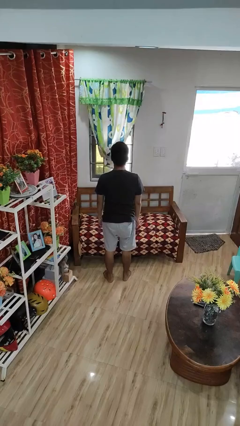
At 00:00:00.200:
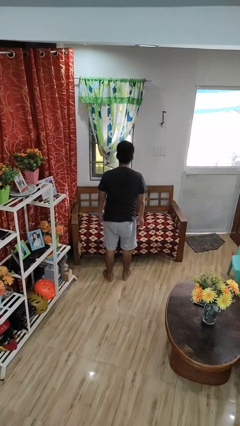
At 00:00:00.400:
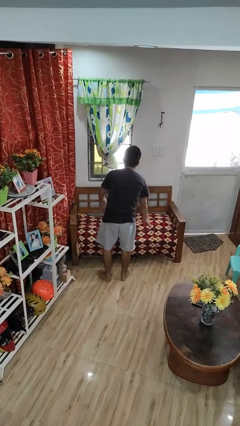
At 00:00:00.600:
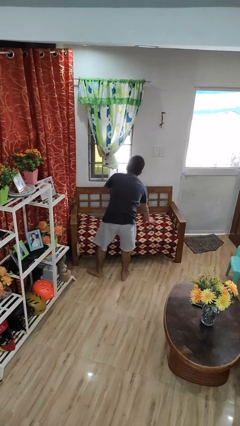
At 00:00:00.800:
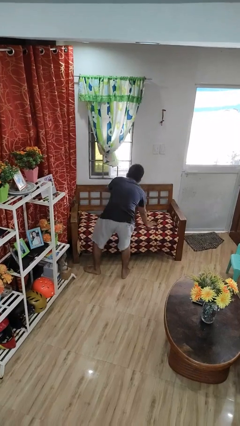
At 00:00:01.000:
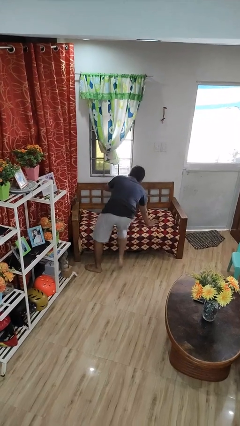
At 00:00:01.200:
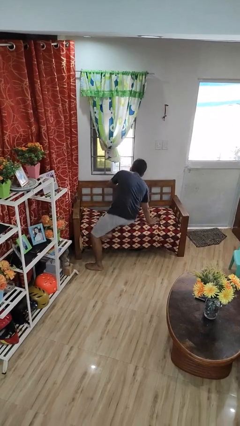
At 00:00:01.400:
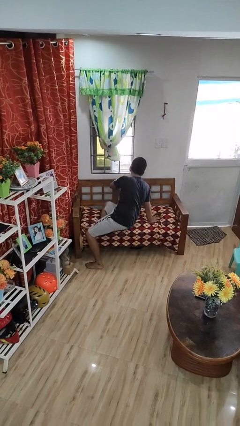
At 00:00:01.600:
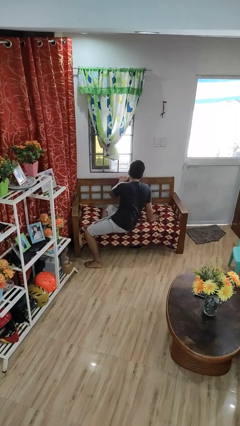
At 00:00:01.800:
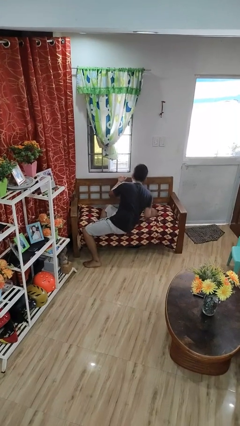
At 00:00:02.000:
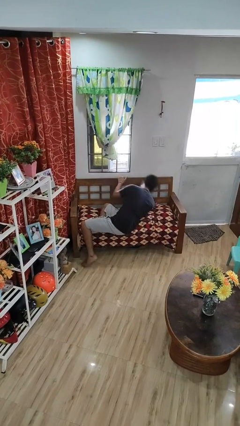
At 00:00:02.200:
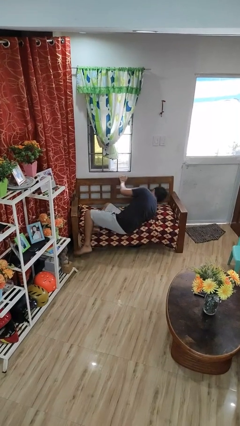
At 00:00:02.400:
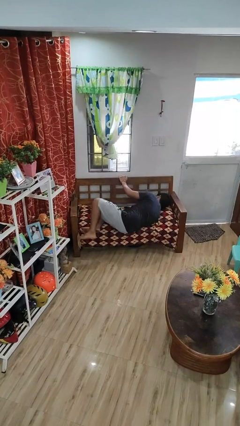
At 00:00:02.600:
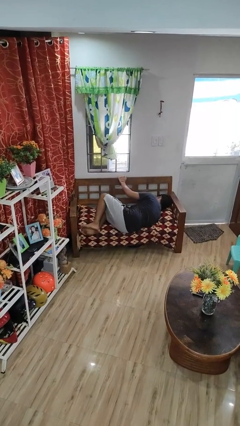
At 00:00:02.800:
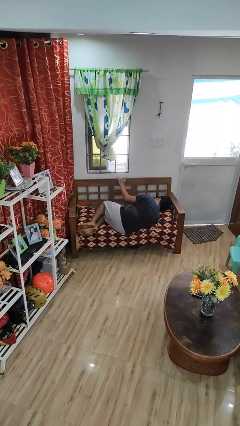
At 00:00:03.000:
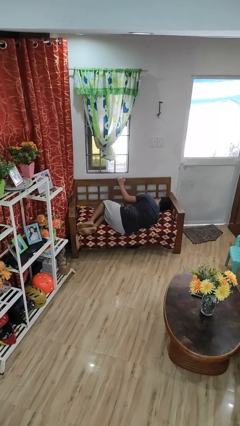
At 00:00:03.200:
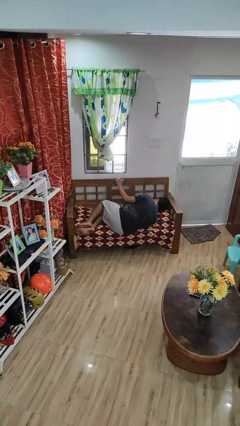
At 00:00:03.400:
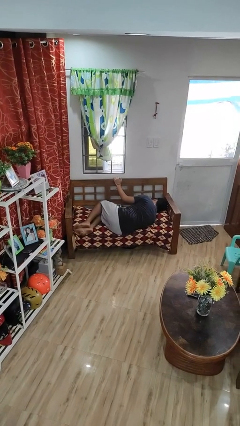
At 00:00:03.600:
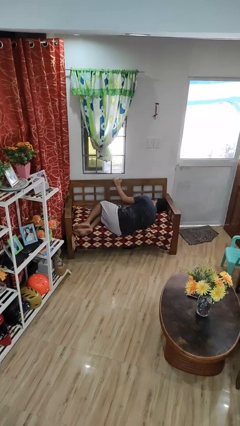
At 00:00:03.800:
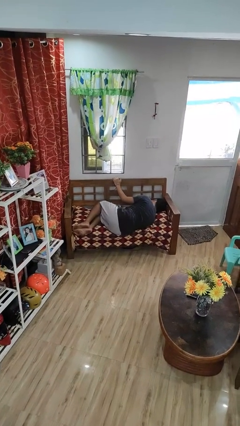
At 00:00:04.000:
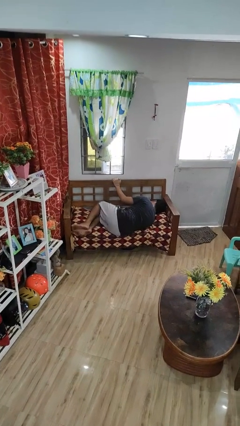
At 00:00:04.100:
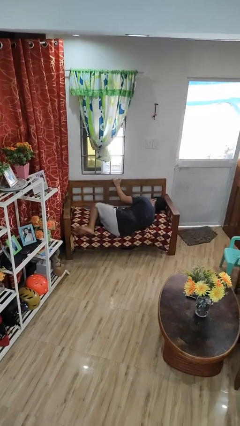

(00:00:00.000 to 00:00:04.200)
person lies down on couch

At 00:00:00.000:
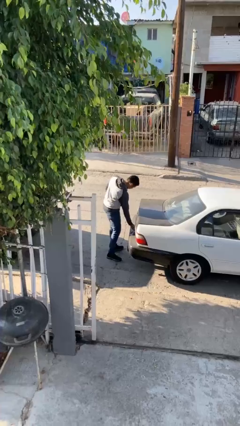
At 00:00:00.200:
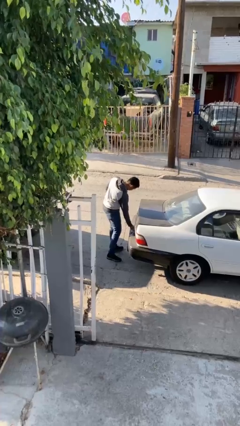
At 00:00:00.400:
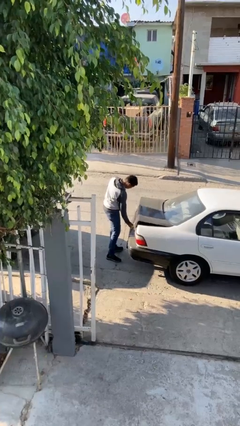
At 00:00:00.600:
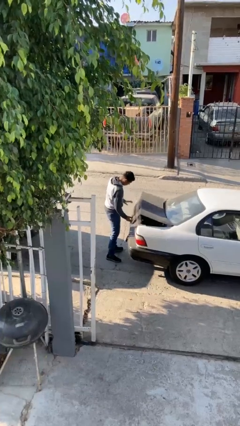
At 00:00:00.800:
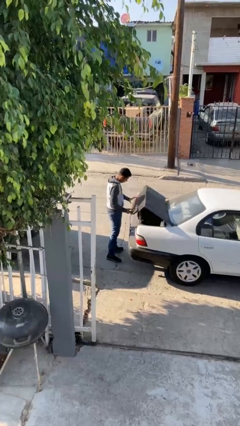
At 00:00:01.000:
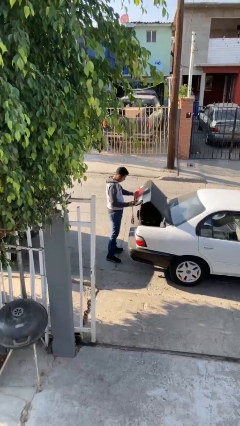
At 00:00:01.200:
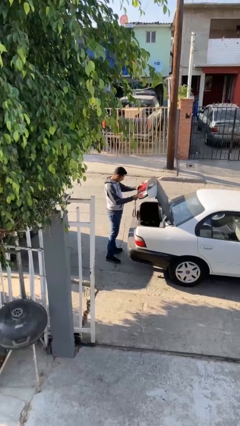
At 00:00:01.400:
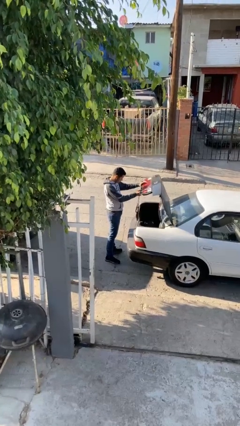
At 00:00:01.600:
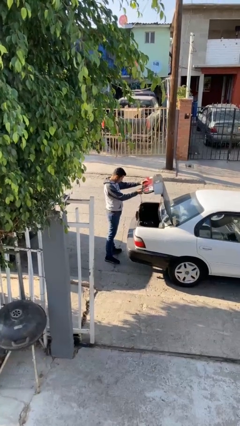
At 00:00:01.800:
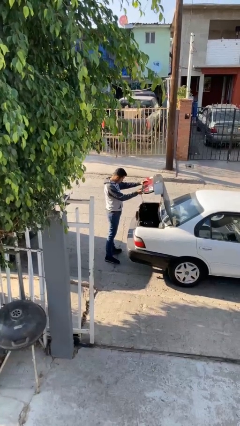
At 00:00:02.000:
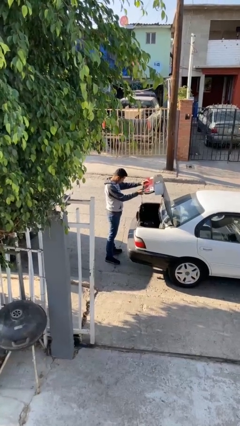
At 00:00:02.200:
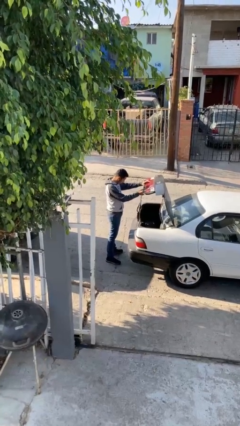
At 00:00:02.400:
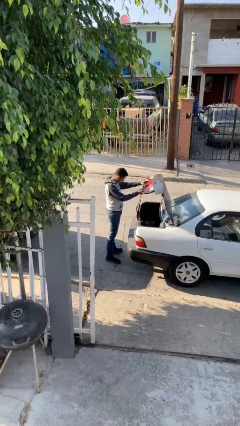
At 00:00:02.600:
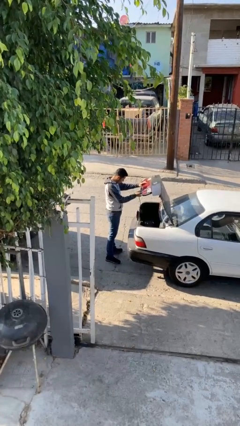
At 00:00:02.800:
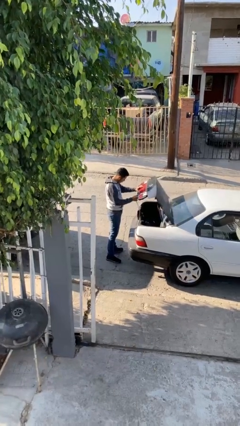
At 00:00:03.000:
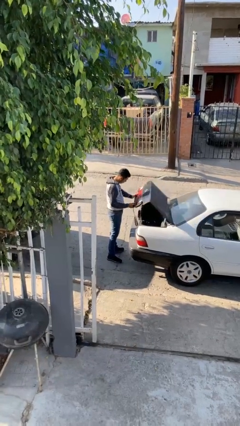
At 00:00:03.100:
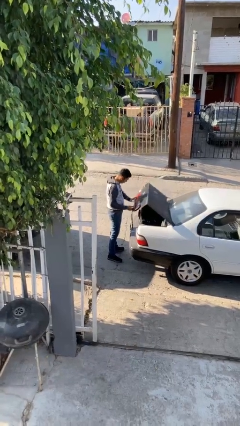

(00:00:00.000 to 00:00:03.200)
person opens car trunk

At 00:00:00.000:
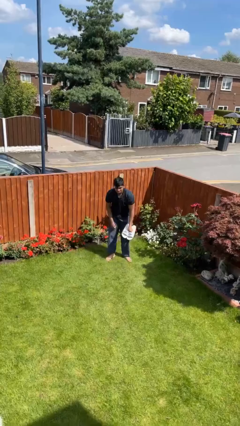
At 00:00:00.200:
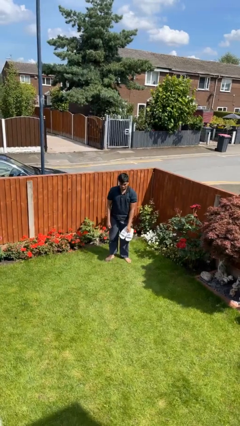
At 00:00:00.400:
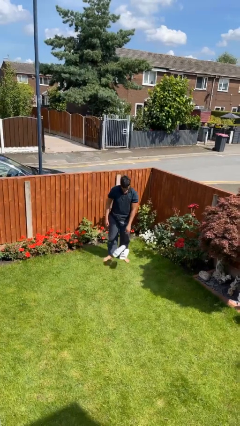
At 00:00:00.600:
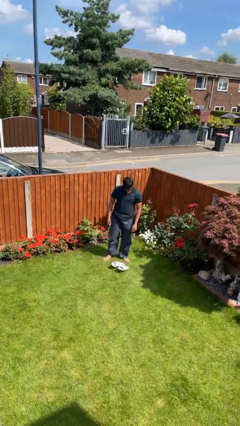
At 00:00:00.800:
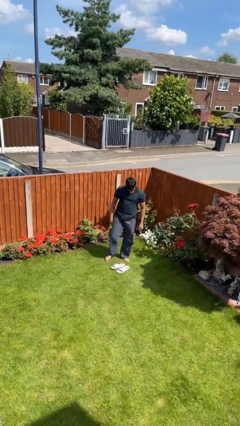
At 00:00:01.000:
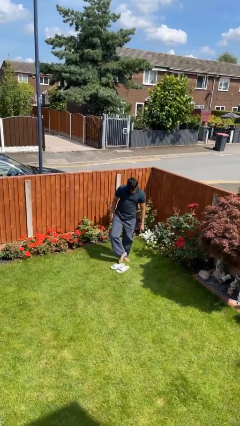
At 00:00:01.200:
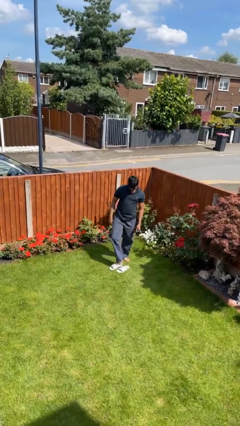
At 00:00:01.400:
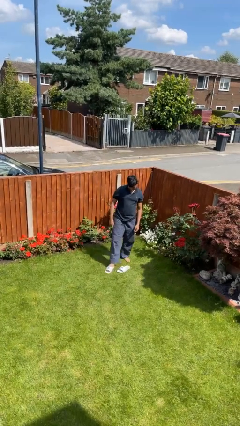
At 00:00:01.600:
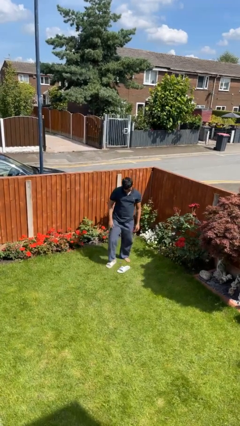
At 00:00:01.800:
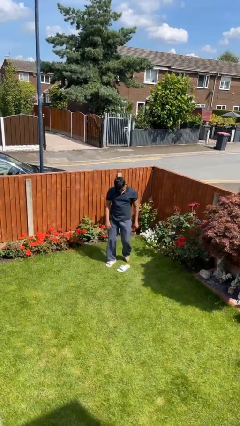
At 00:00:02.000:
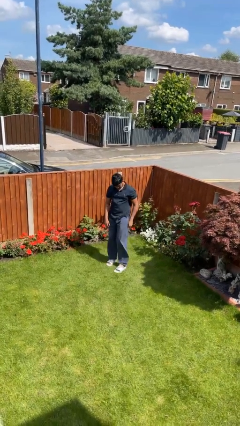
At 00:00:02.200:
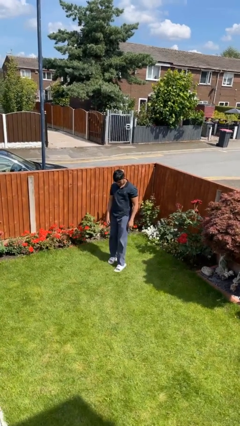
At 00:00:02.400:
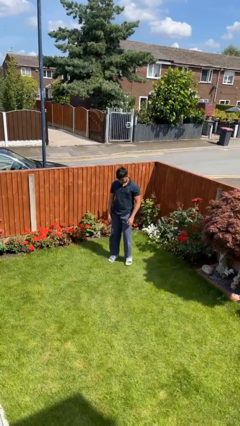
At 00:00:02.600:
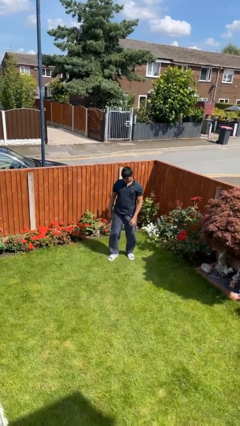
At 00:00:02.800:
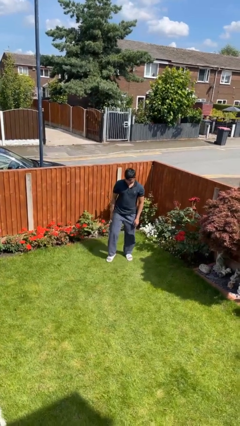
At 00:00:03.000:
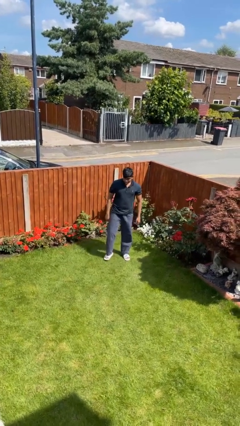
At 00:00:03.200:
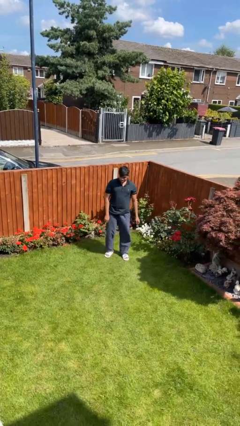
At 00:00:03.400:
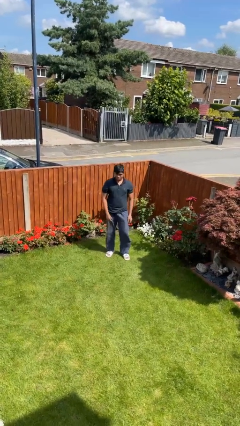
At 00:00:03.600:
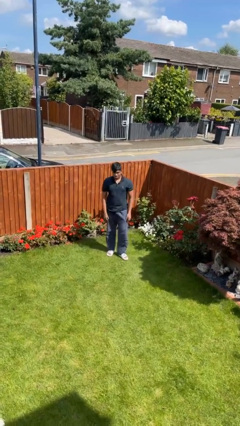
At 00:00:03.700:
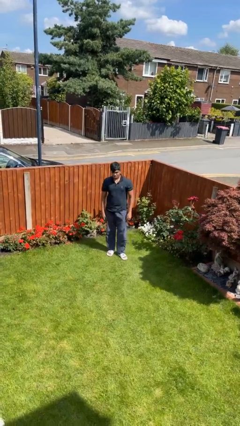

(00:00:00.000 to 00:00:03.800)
person puts on shoes

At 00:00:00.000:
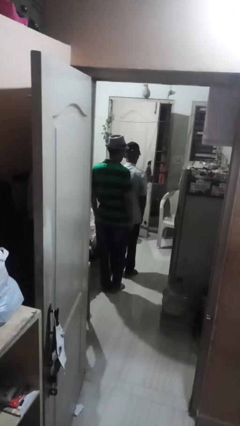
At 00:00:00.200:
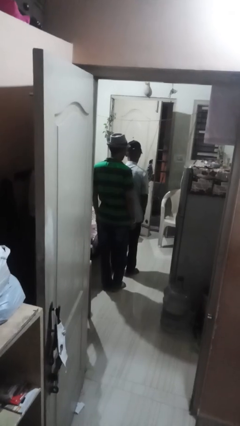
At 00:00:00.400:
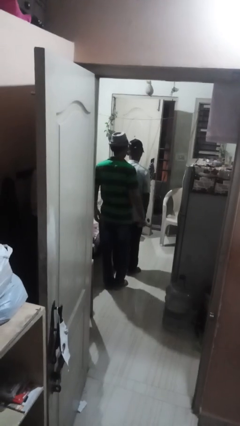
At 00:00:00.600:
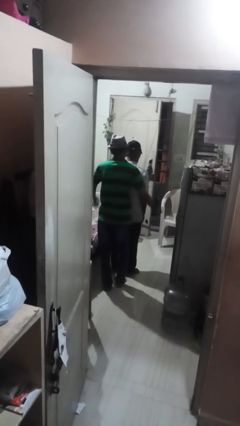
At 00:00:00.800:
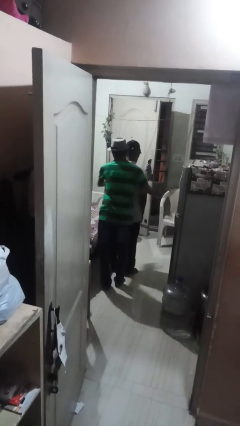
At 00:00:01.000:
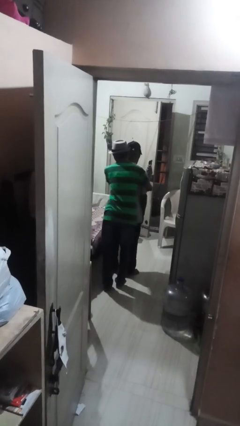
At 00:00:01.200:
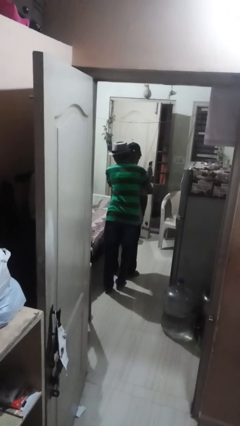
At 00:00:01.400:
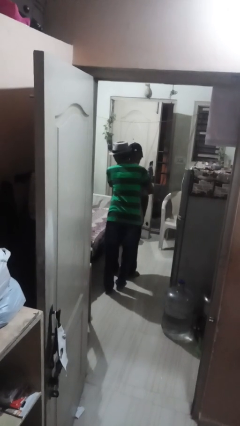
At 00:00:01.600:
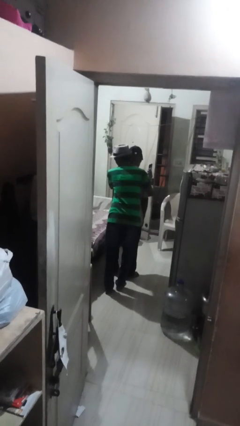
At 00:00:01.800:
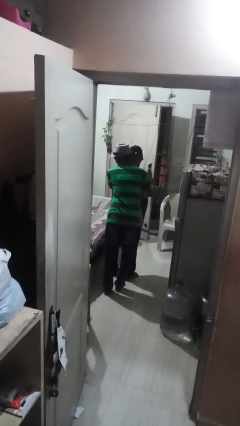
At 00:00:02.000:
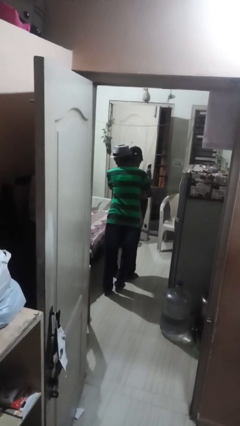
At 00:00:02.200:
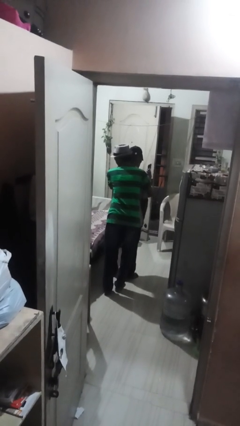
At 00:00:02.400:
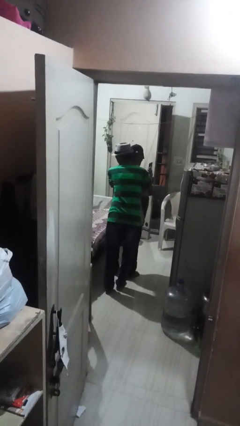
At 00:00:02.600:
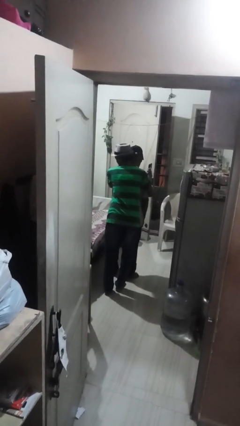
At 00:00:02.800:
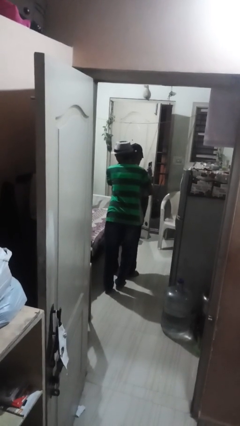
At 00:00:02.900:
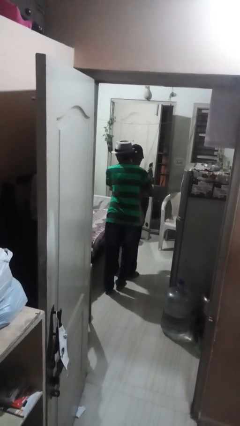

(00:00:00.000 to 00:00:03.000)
person hugs person from behind

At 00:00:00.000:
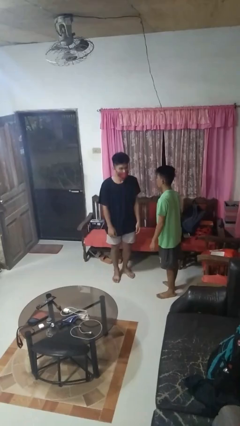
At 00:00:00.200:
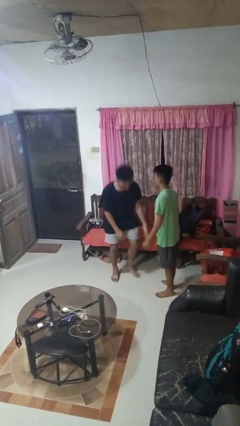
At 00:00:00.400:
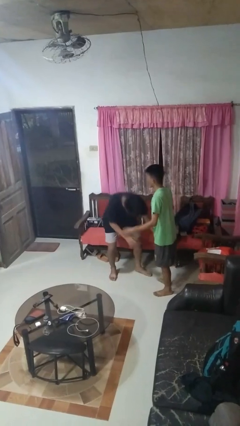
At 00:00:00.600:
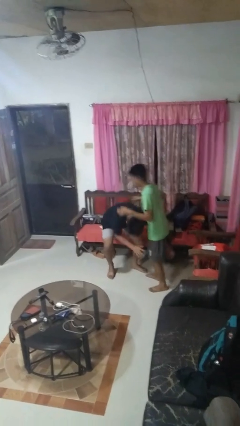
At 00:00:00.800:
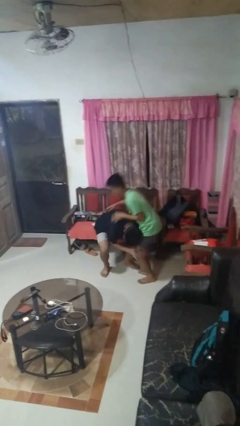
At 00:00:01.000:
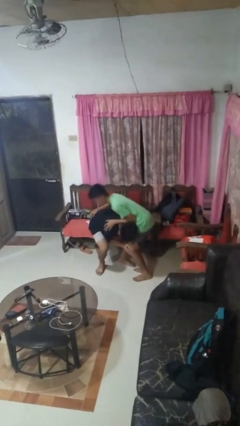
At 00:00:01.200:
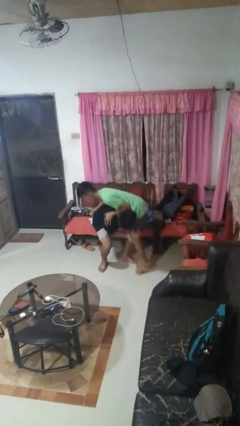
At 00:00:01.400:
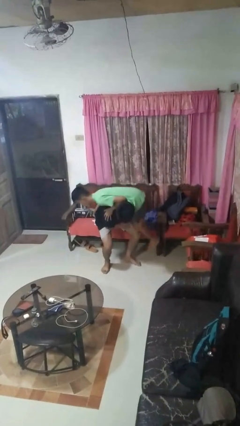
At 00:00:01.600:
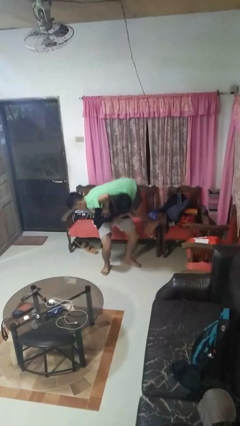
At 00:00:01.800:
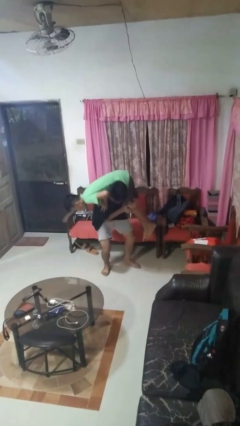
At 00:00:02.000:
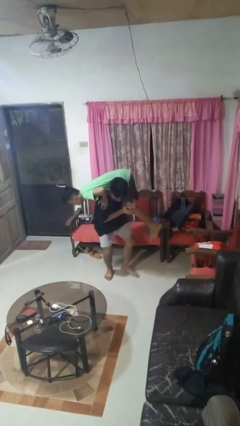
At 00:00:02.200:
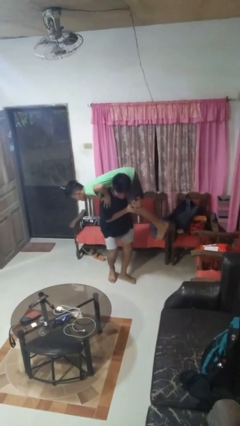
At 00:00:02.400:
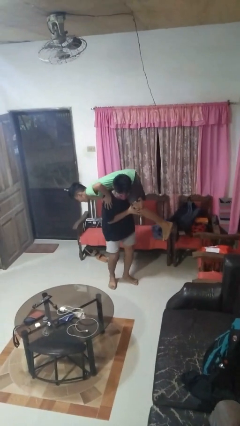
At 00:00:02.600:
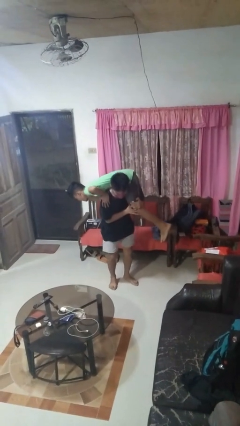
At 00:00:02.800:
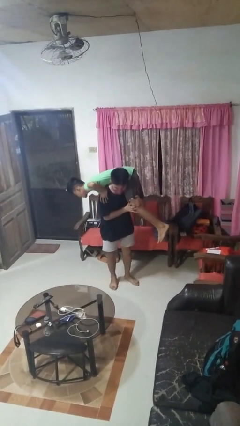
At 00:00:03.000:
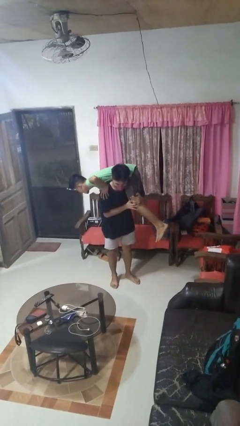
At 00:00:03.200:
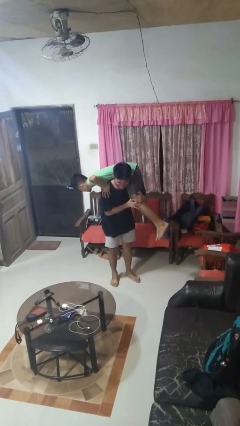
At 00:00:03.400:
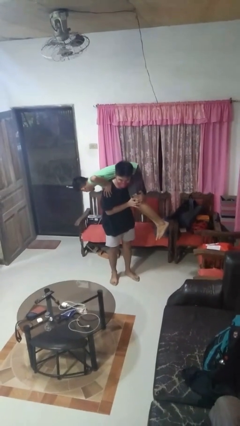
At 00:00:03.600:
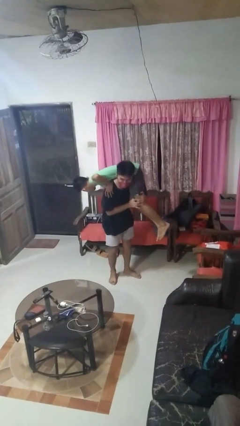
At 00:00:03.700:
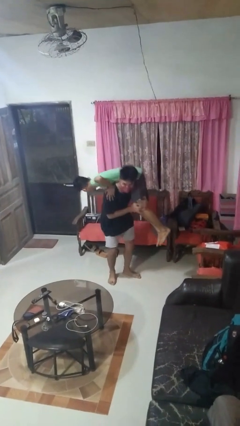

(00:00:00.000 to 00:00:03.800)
person carries person over shoulder
